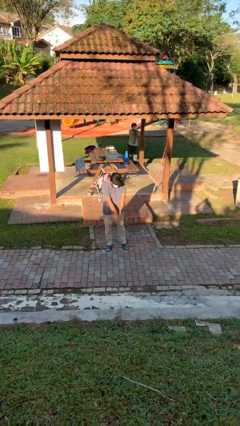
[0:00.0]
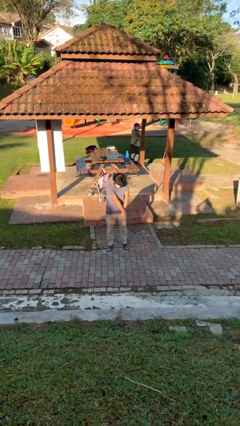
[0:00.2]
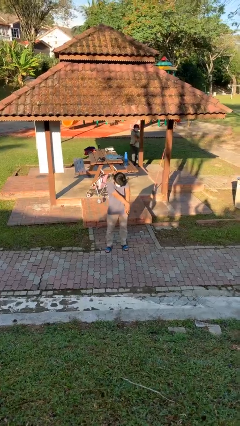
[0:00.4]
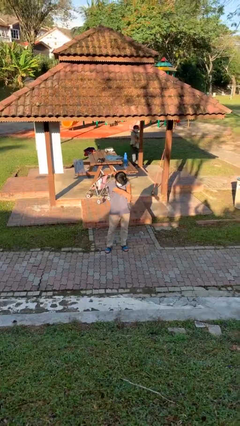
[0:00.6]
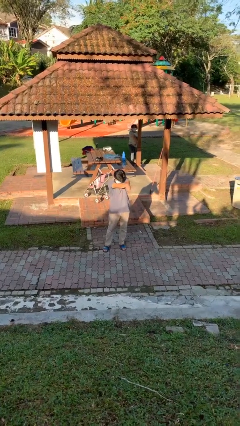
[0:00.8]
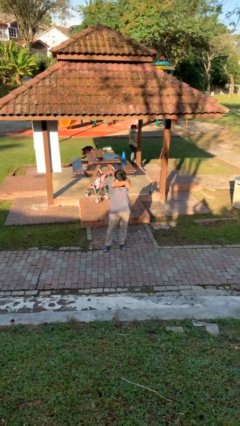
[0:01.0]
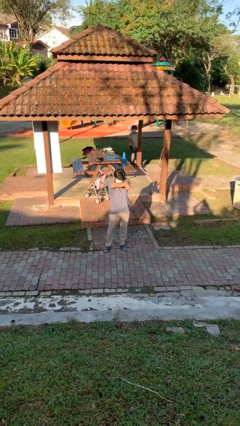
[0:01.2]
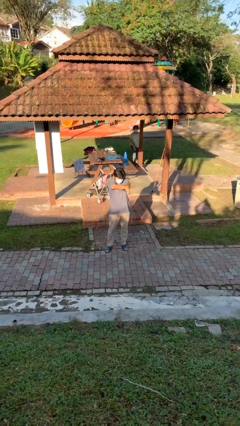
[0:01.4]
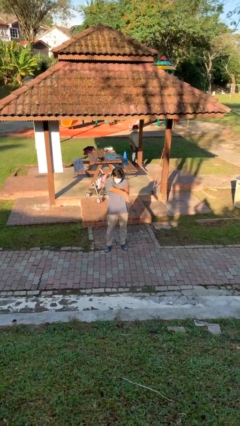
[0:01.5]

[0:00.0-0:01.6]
person crosses arms

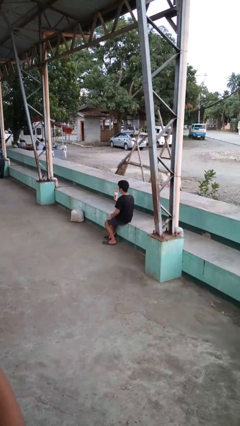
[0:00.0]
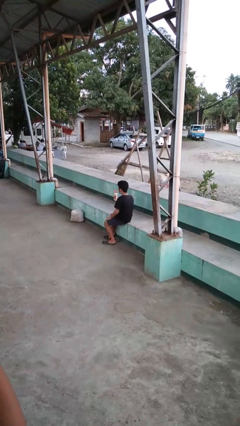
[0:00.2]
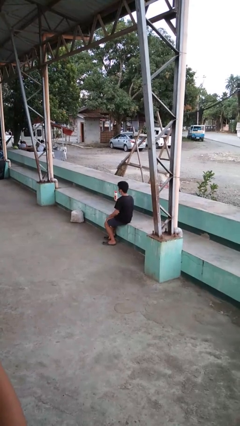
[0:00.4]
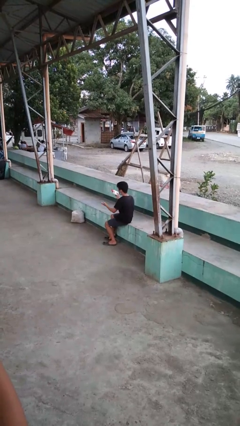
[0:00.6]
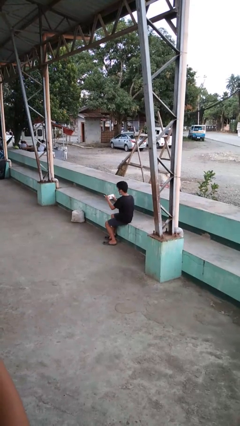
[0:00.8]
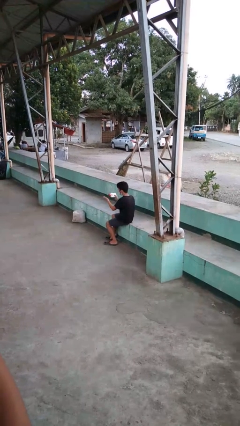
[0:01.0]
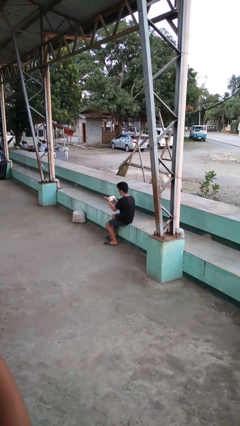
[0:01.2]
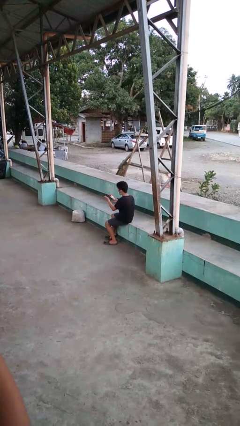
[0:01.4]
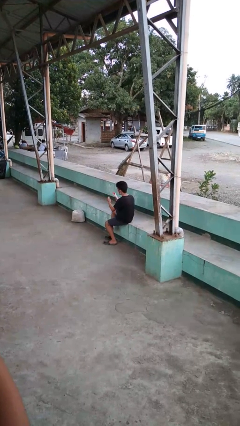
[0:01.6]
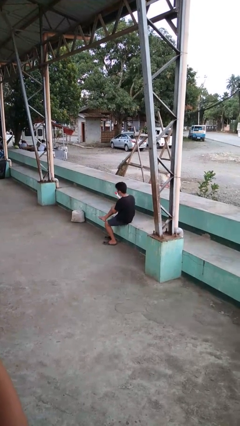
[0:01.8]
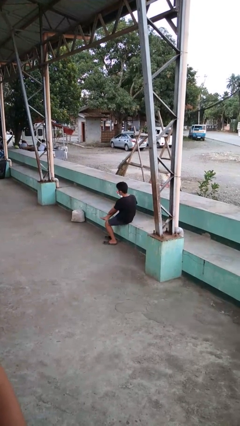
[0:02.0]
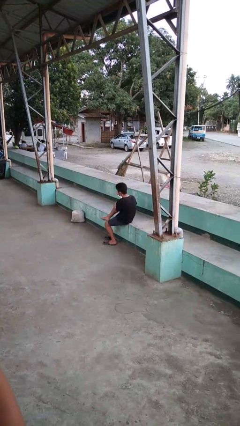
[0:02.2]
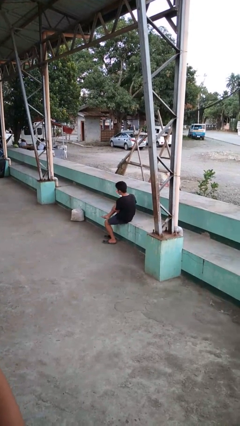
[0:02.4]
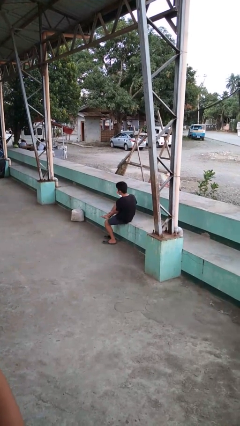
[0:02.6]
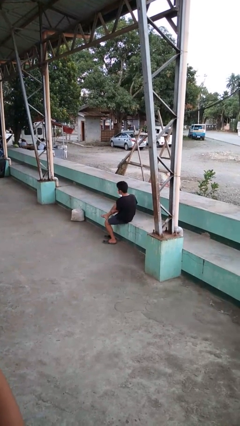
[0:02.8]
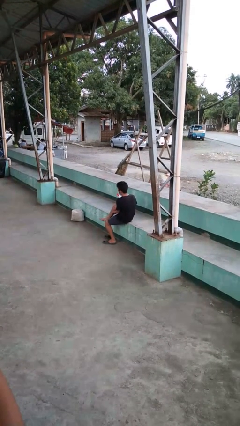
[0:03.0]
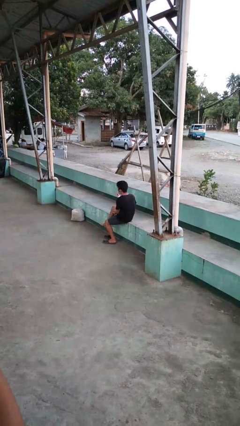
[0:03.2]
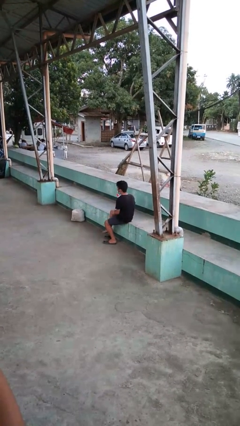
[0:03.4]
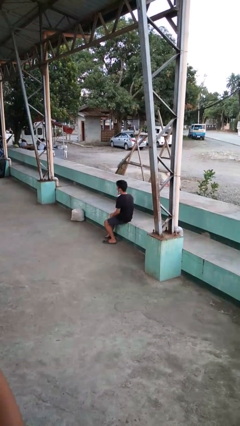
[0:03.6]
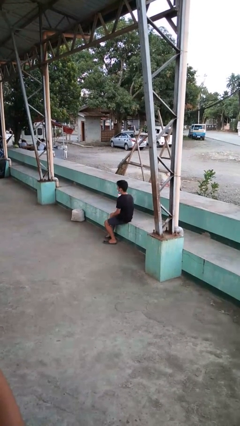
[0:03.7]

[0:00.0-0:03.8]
person applies sunscreen

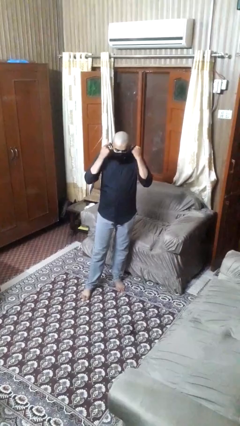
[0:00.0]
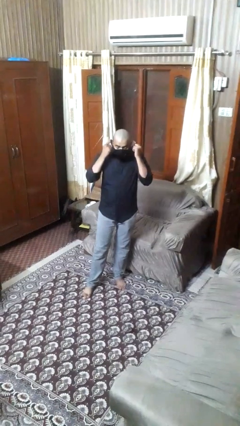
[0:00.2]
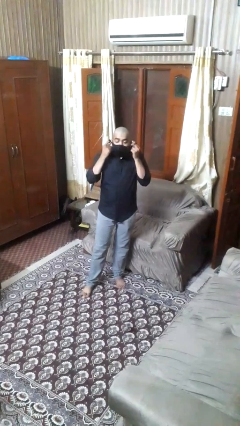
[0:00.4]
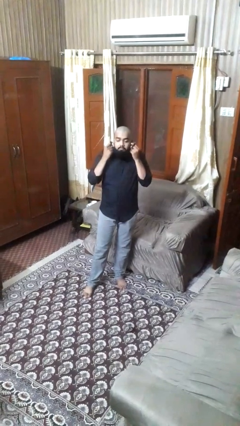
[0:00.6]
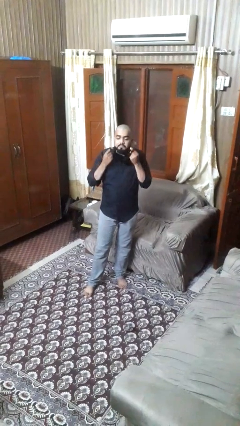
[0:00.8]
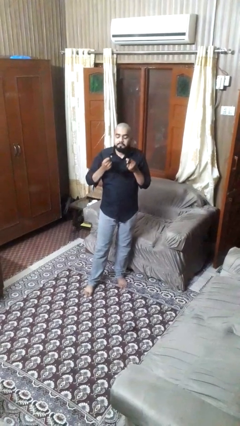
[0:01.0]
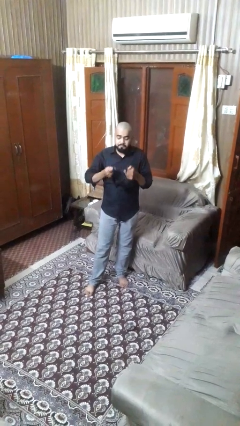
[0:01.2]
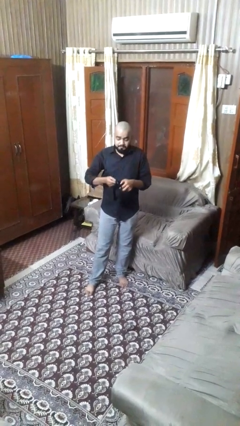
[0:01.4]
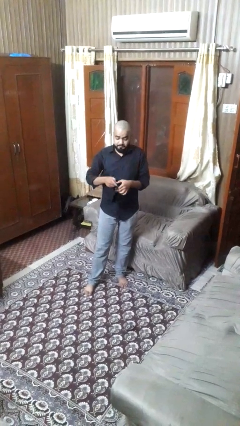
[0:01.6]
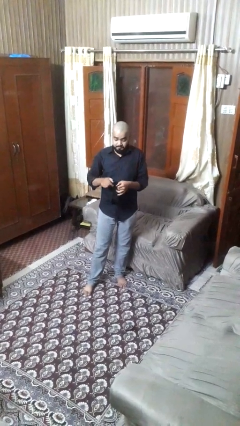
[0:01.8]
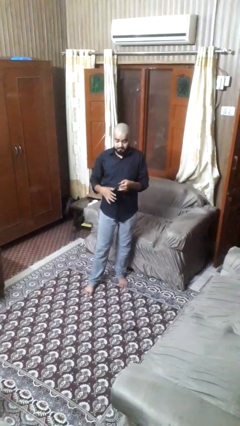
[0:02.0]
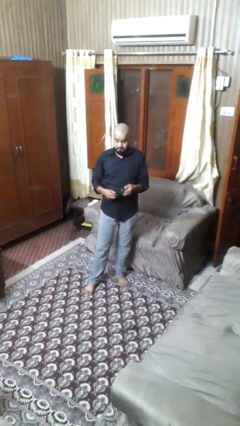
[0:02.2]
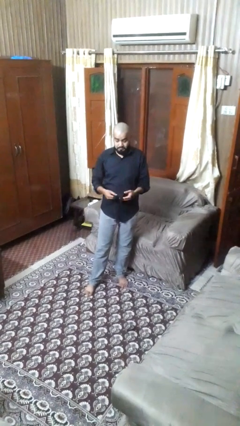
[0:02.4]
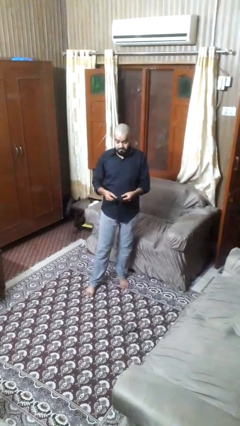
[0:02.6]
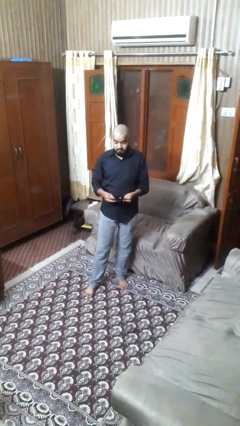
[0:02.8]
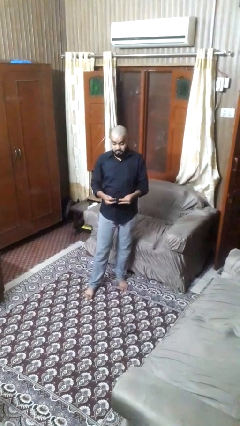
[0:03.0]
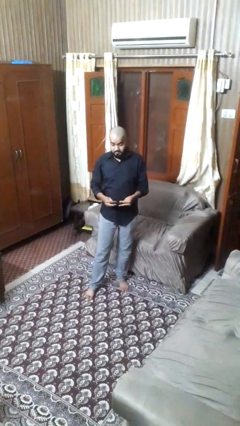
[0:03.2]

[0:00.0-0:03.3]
person takes off facemask

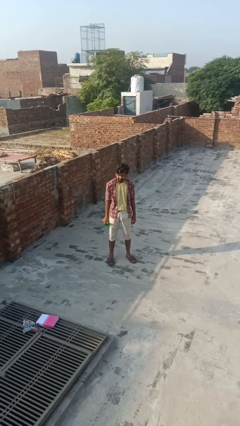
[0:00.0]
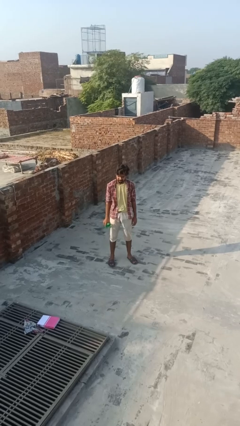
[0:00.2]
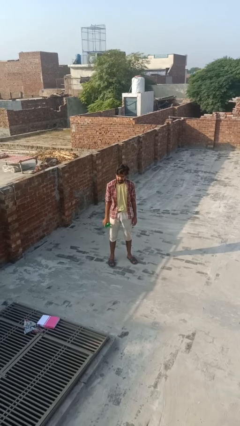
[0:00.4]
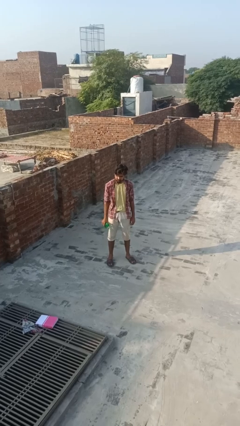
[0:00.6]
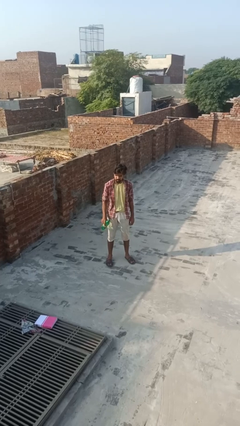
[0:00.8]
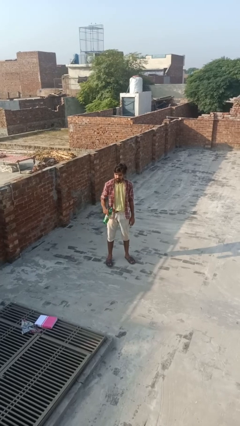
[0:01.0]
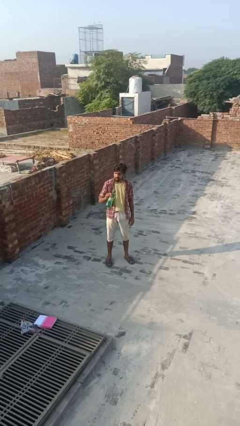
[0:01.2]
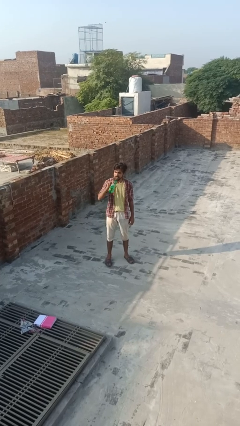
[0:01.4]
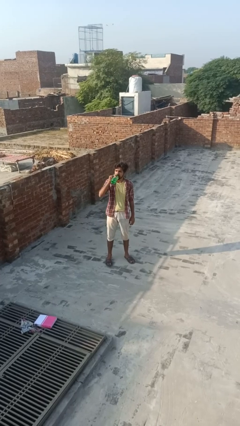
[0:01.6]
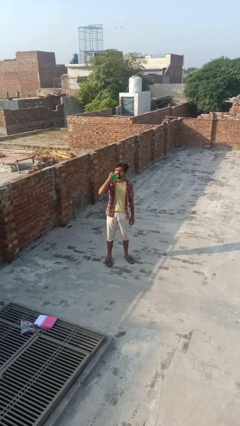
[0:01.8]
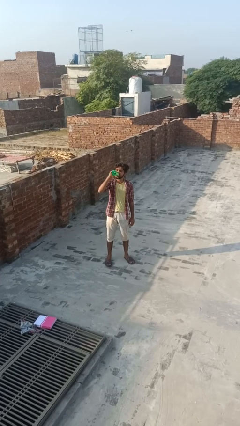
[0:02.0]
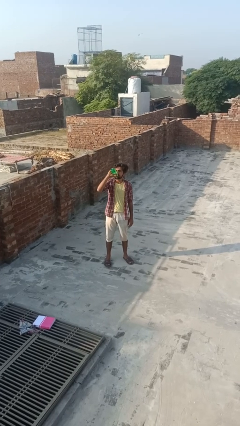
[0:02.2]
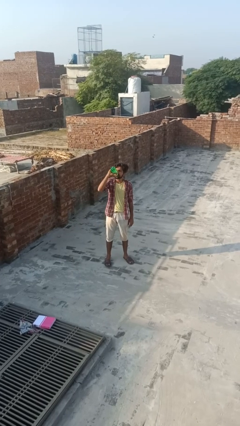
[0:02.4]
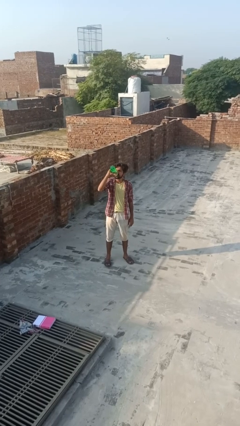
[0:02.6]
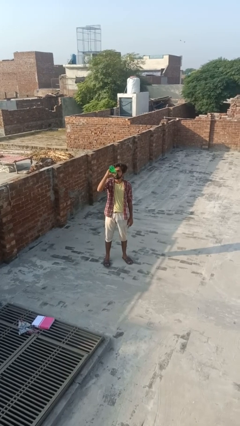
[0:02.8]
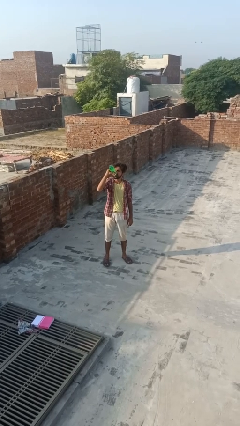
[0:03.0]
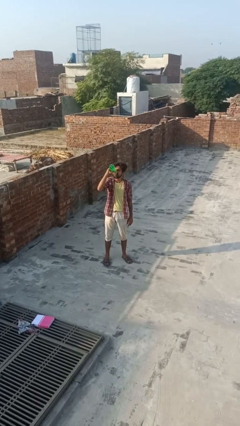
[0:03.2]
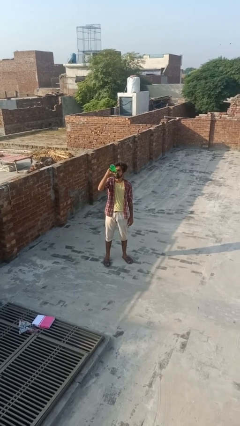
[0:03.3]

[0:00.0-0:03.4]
person drinks from bottle

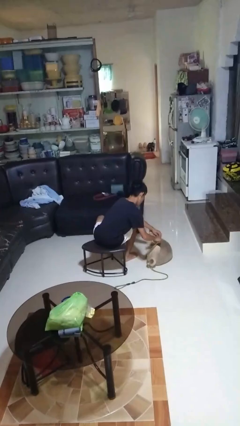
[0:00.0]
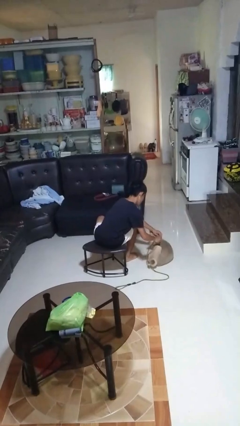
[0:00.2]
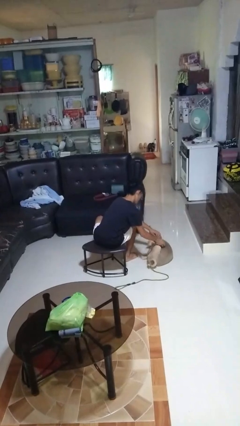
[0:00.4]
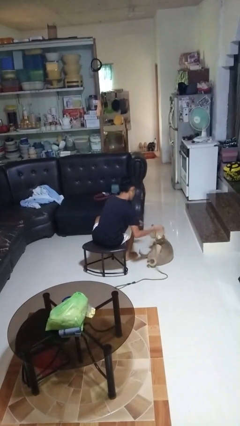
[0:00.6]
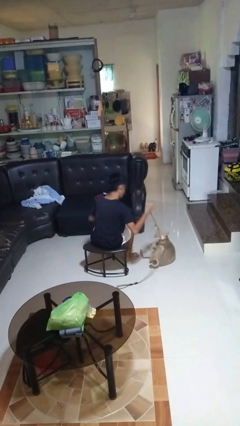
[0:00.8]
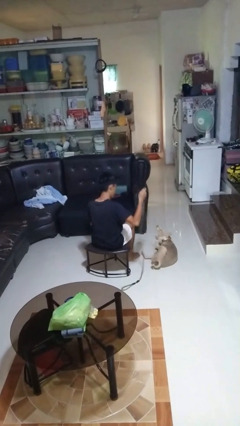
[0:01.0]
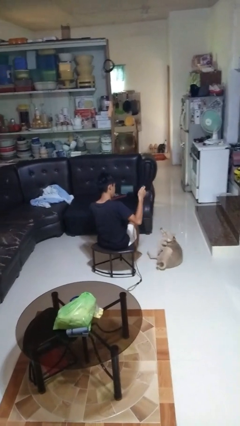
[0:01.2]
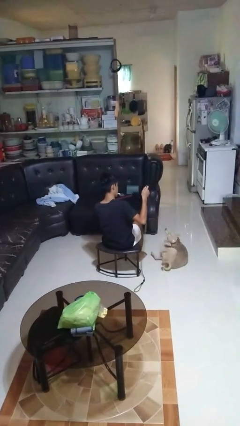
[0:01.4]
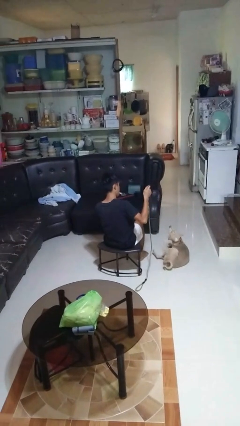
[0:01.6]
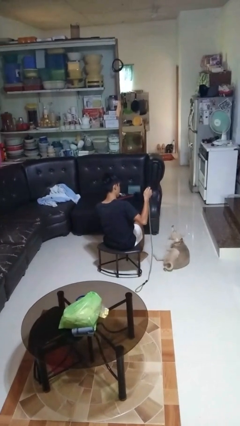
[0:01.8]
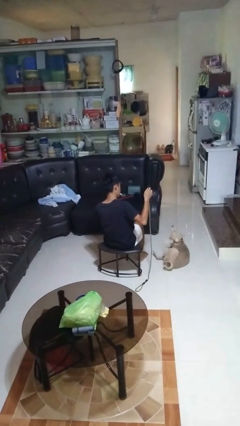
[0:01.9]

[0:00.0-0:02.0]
person unattaches leash from dog

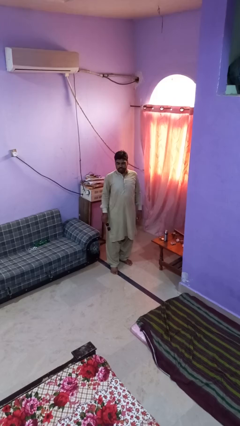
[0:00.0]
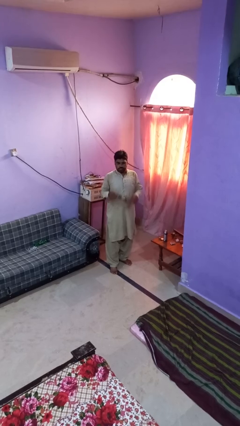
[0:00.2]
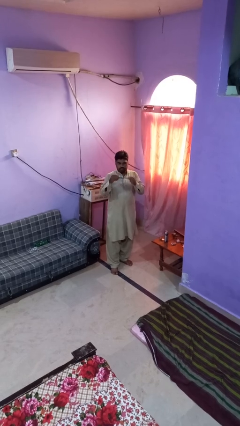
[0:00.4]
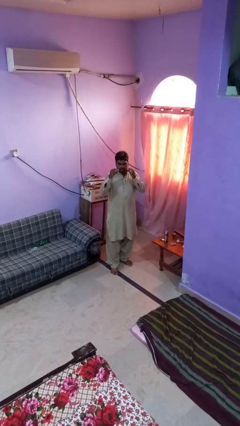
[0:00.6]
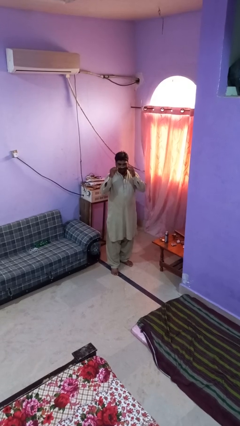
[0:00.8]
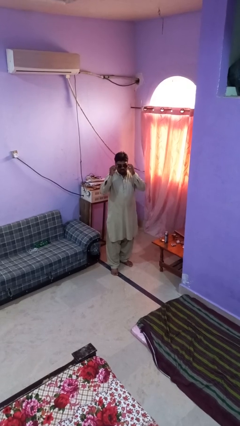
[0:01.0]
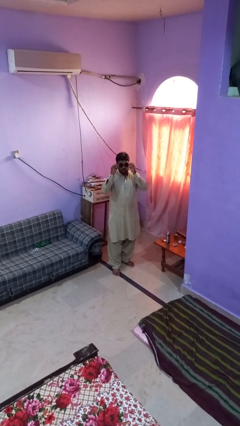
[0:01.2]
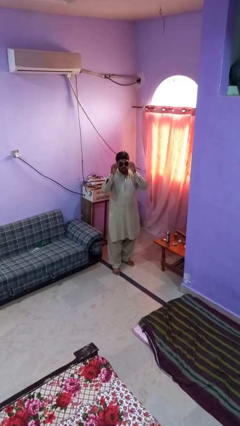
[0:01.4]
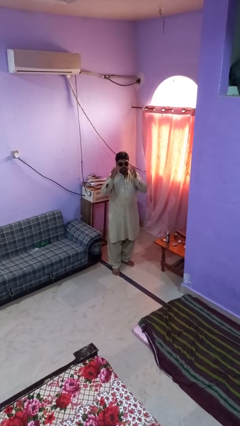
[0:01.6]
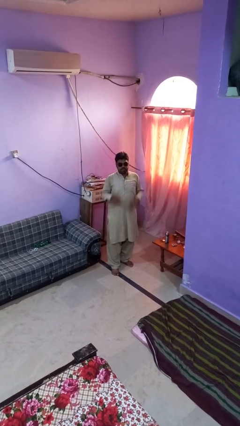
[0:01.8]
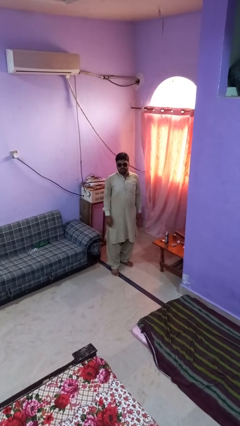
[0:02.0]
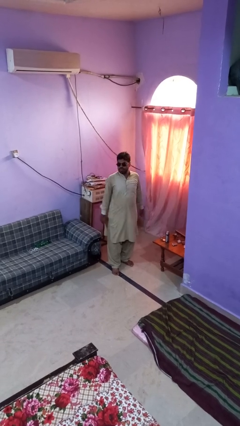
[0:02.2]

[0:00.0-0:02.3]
person puts on sunglasses

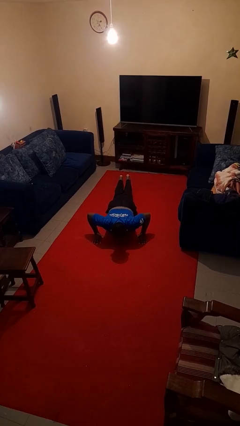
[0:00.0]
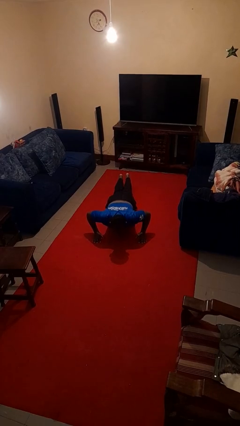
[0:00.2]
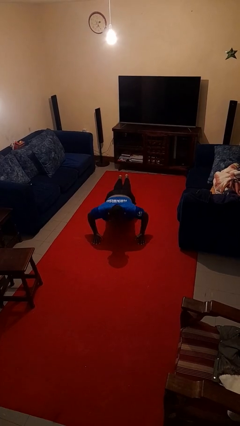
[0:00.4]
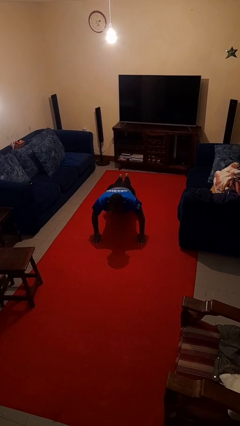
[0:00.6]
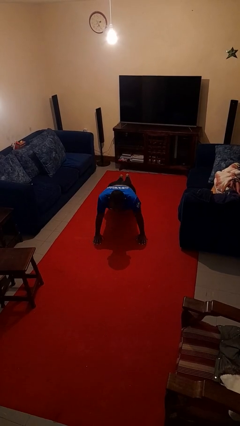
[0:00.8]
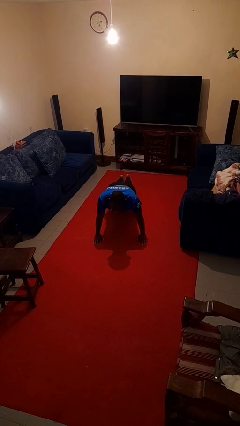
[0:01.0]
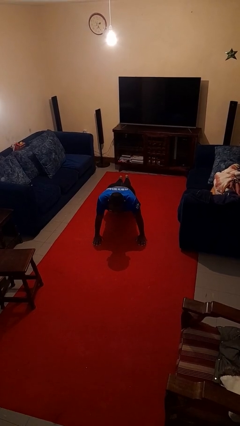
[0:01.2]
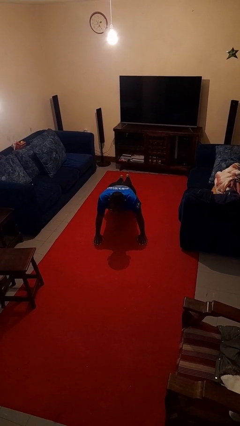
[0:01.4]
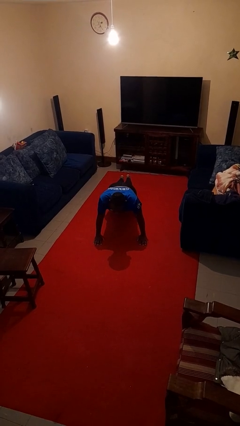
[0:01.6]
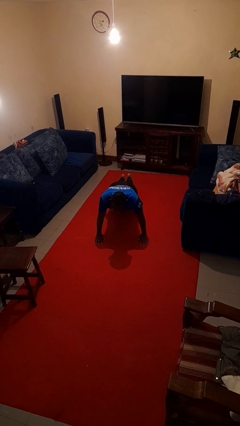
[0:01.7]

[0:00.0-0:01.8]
person exercises with pushup
